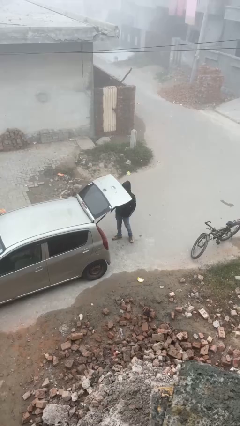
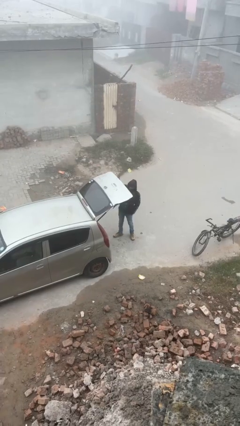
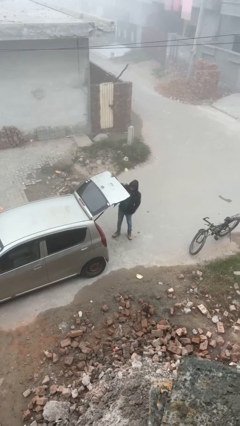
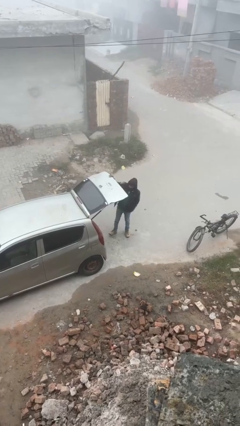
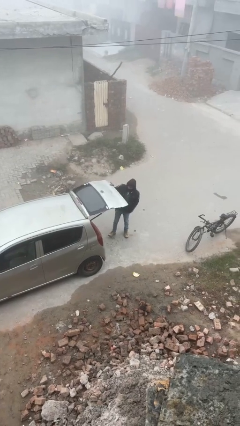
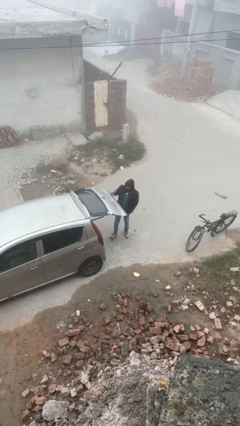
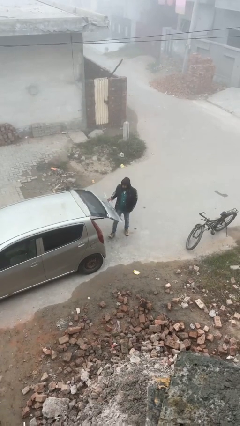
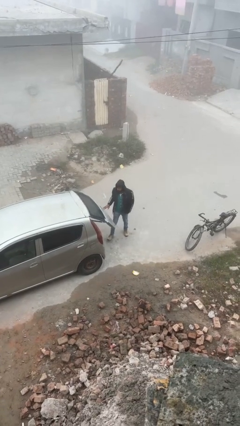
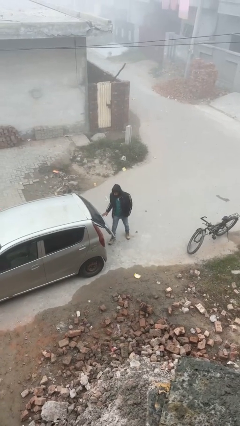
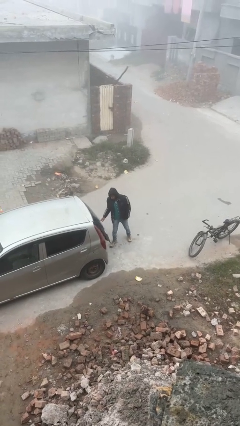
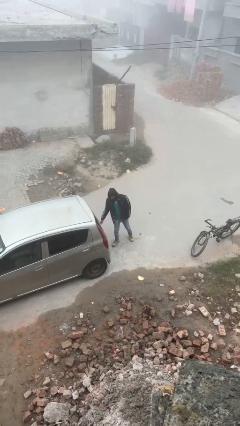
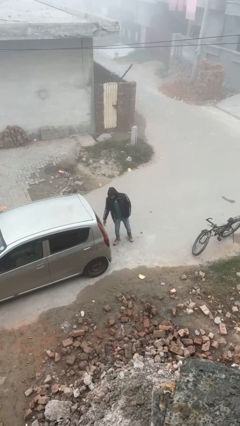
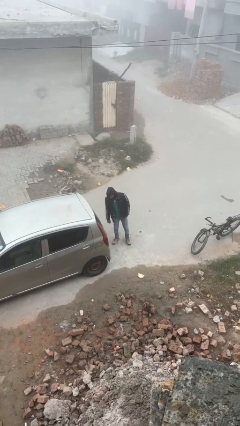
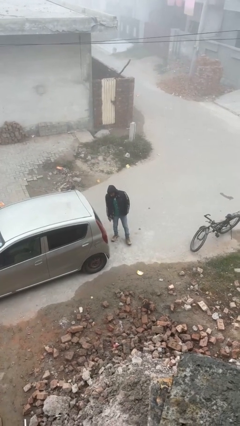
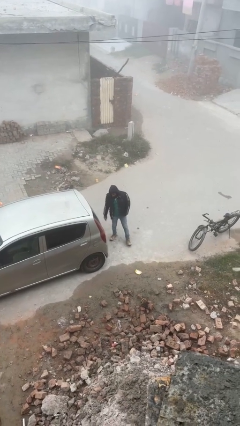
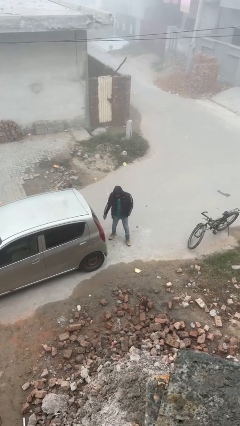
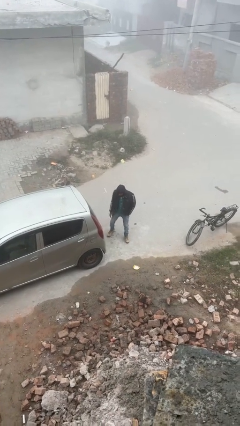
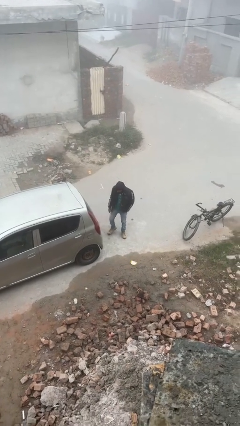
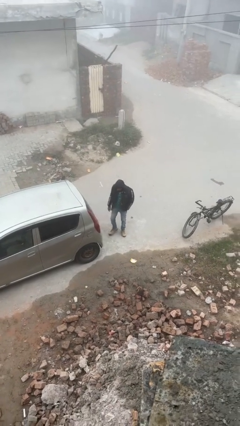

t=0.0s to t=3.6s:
person closes car trunk

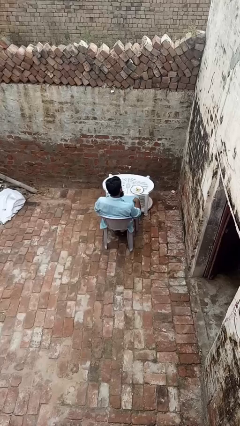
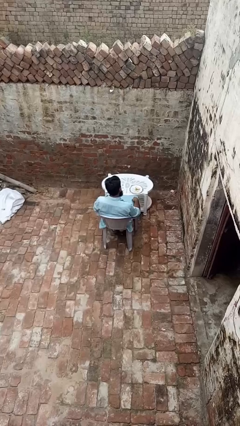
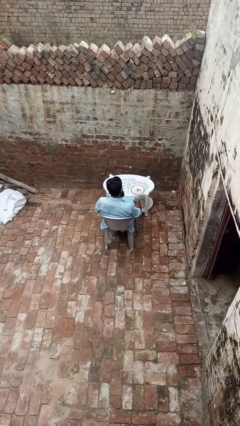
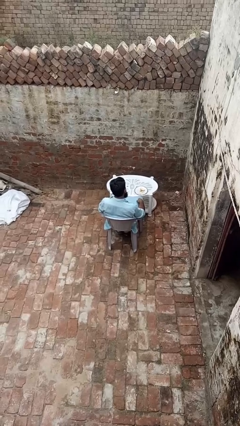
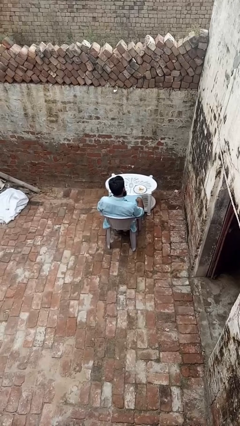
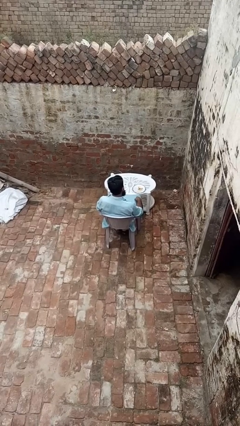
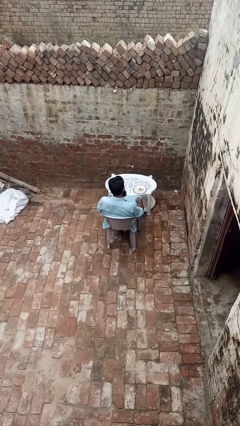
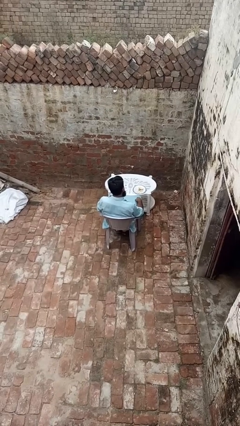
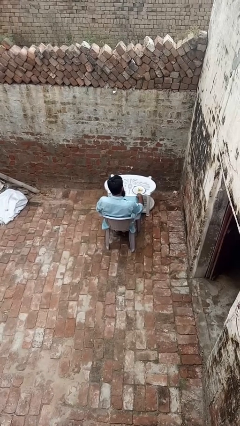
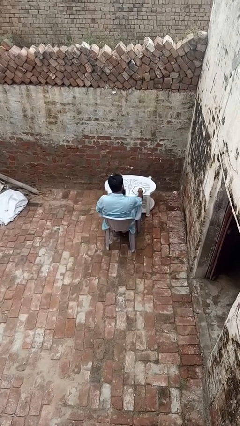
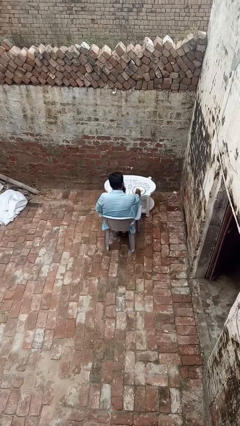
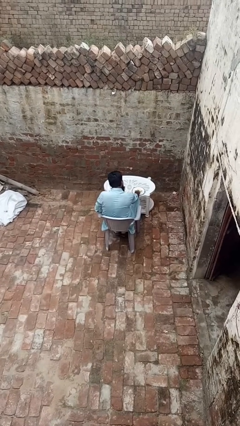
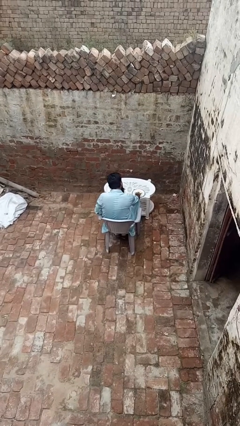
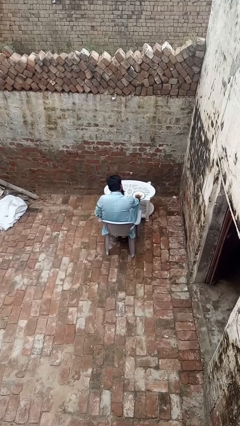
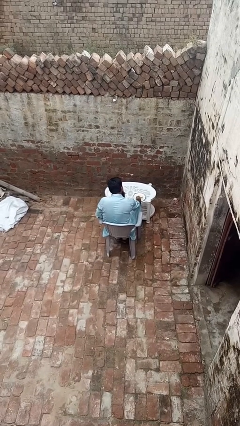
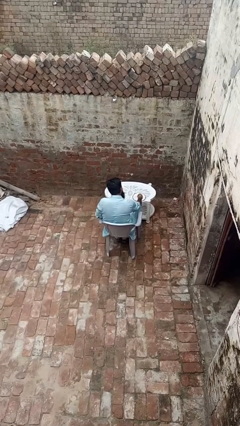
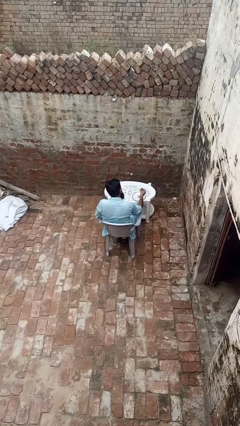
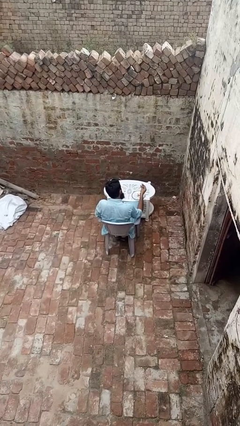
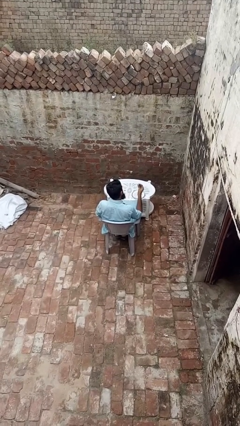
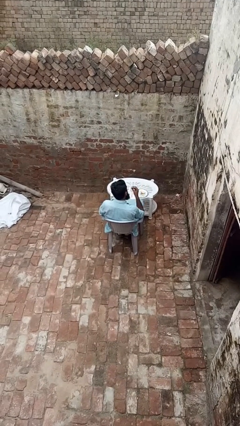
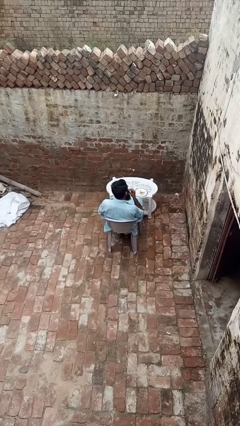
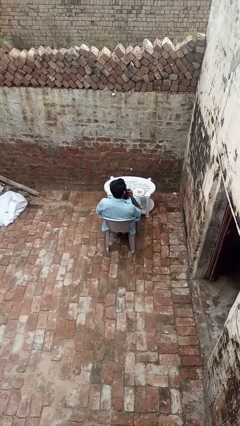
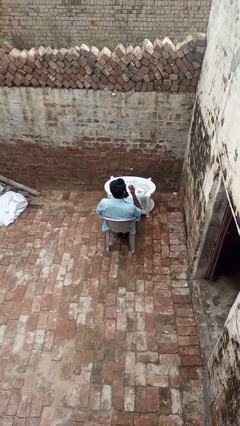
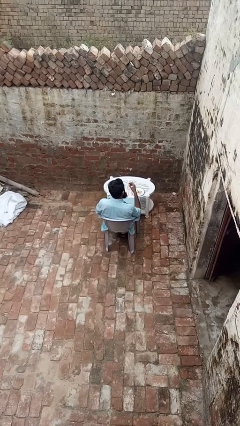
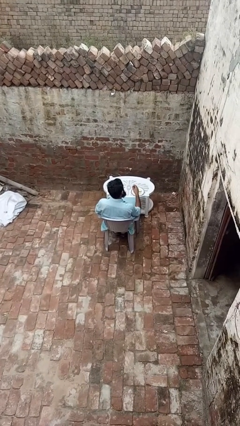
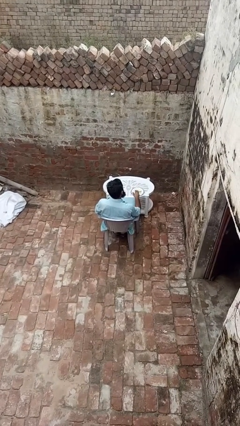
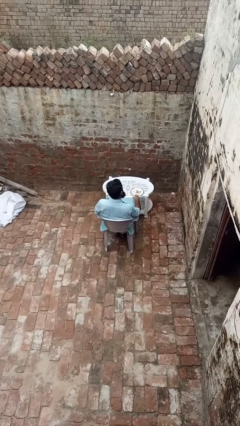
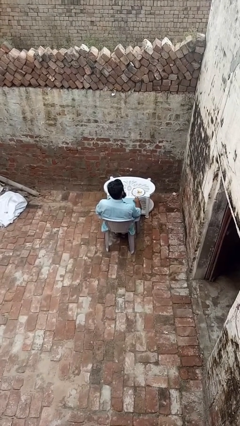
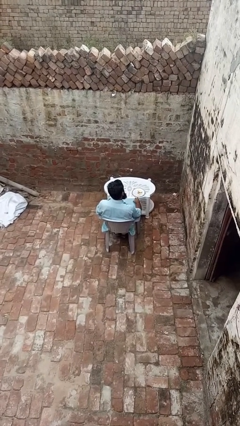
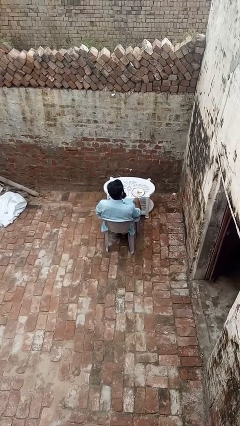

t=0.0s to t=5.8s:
person eats with hands

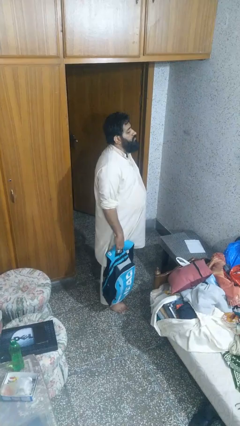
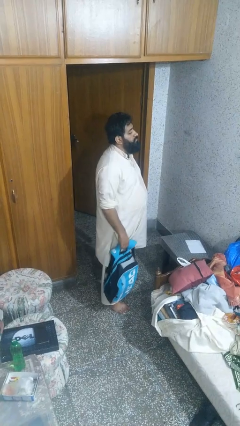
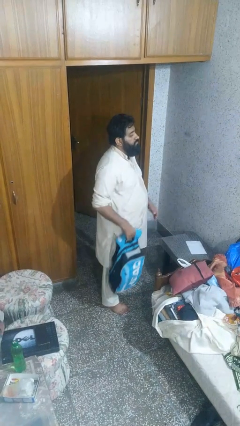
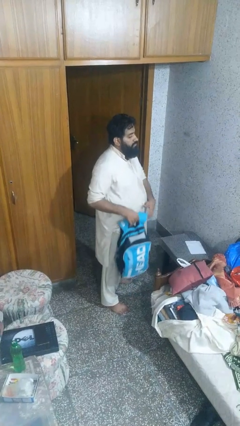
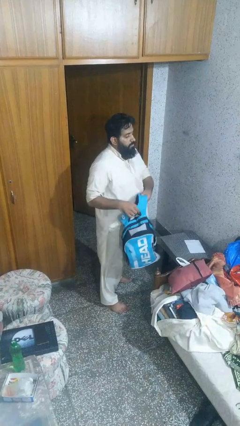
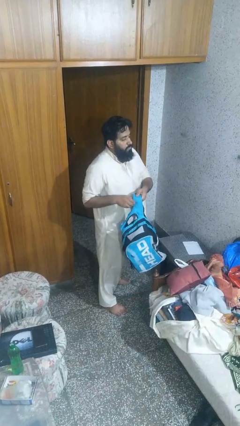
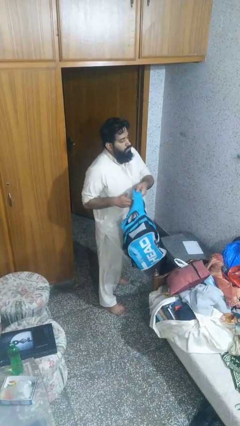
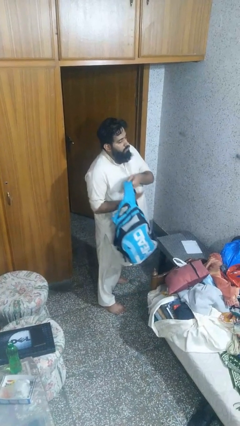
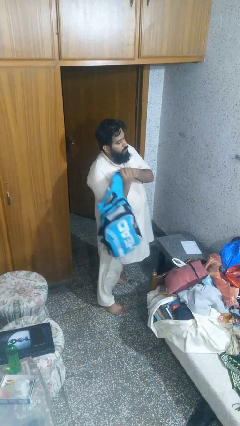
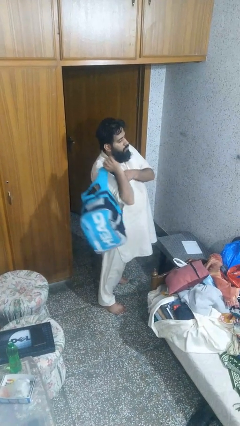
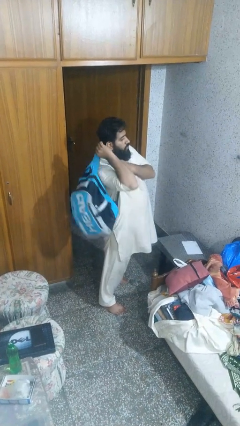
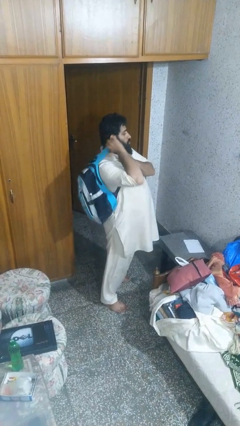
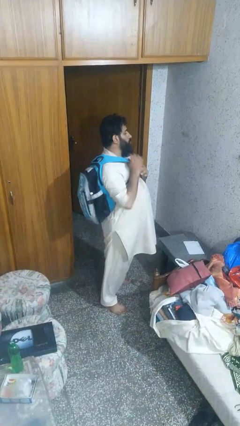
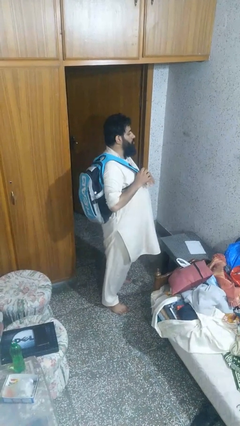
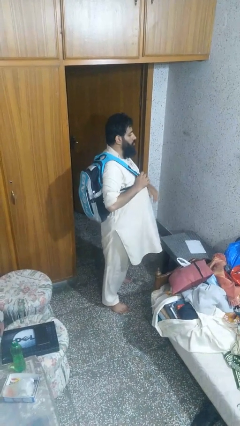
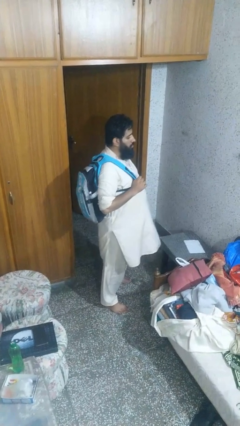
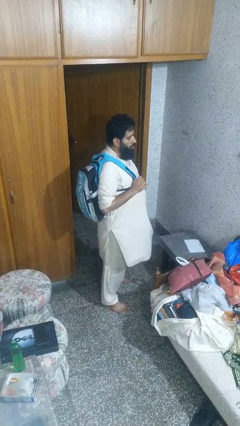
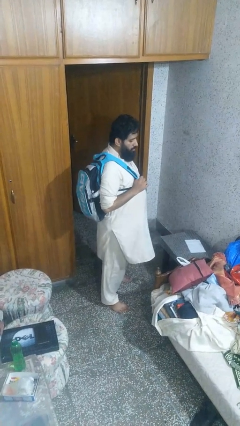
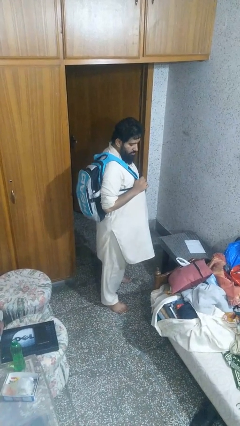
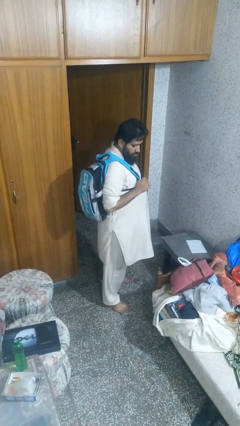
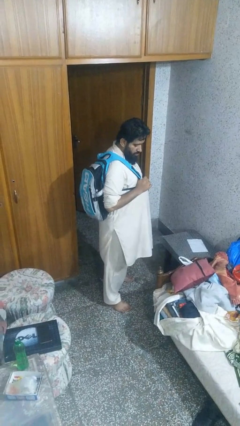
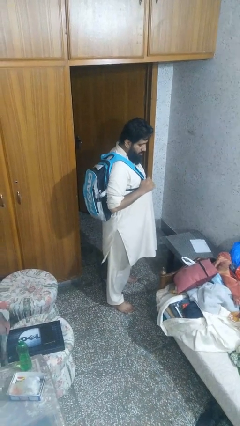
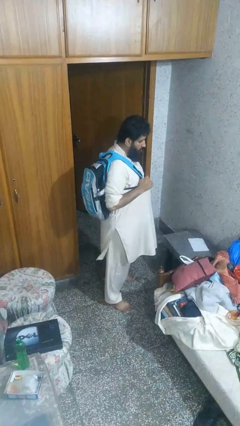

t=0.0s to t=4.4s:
person puts on backpack

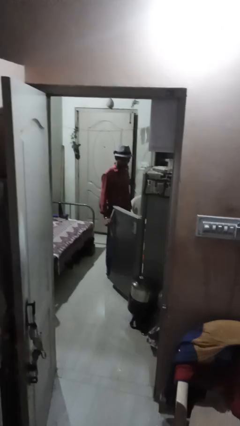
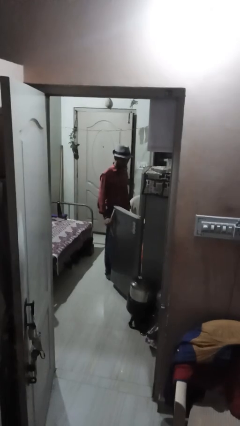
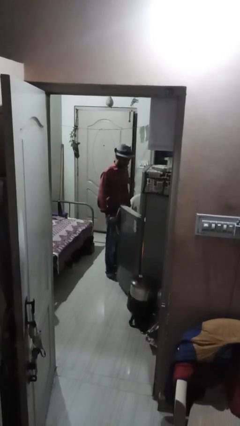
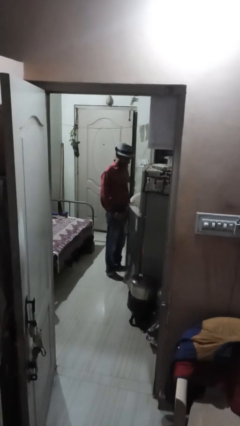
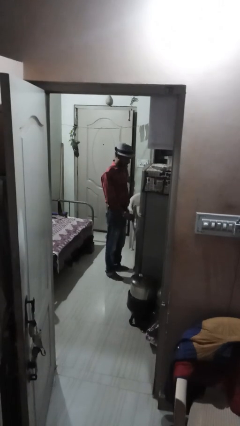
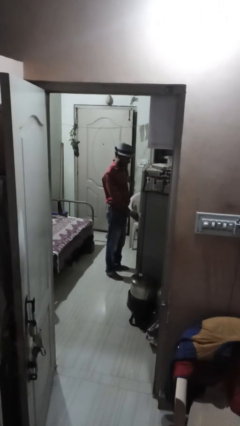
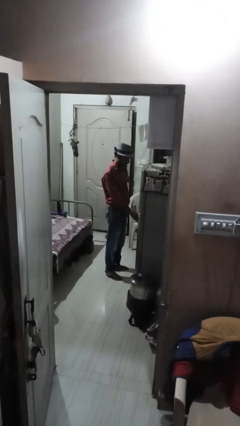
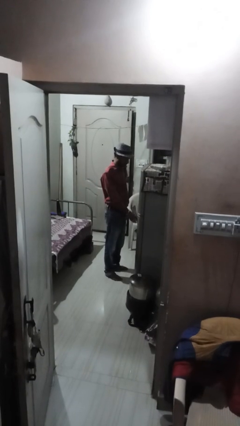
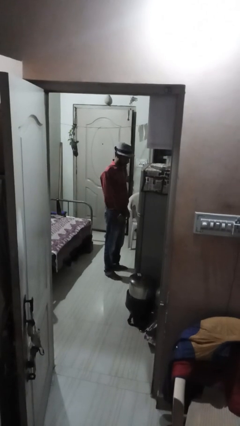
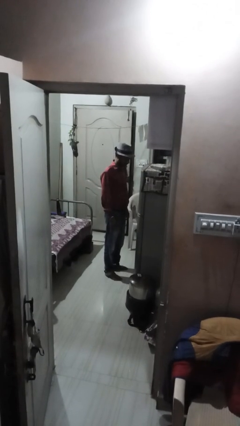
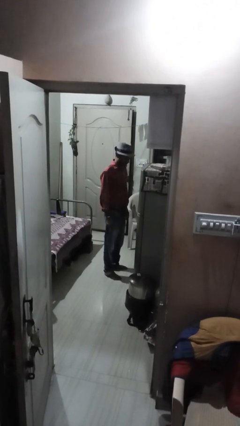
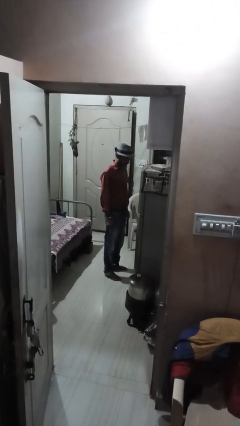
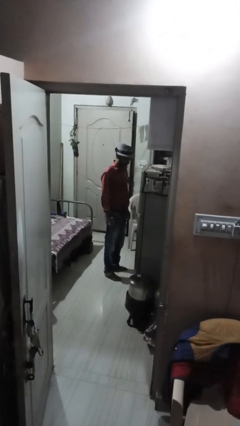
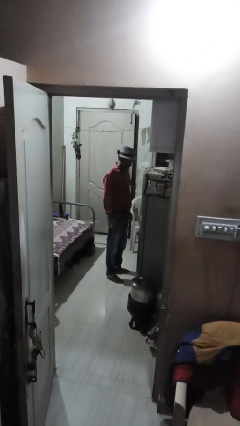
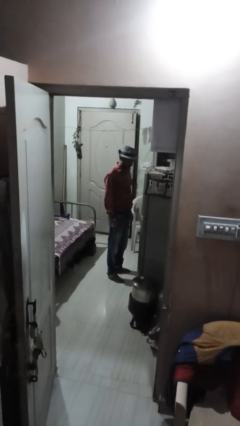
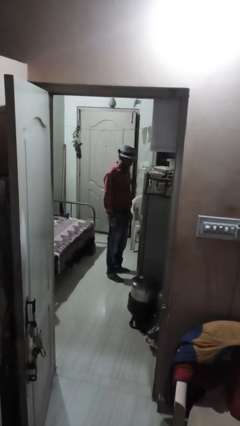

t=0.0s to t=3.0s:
person closes refrigerator

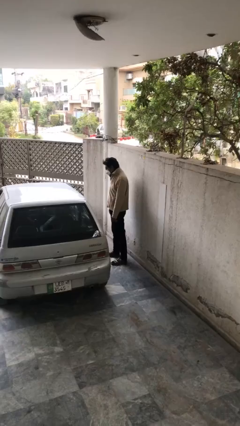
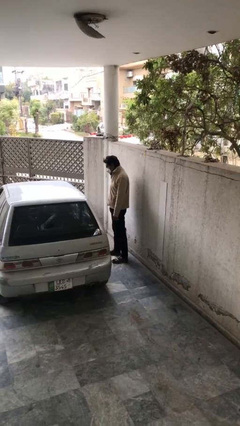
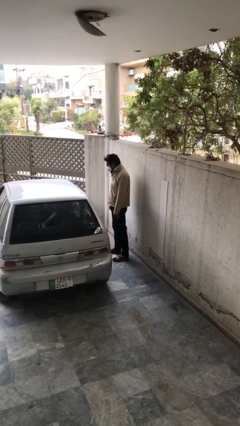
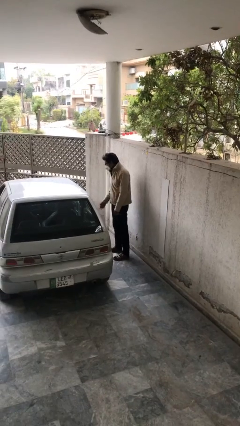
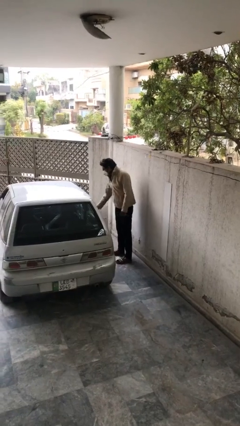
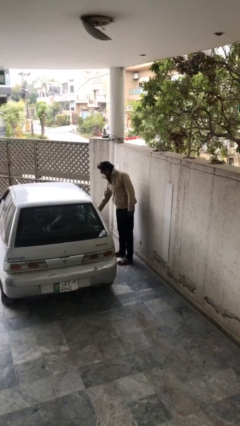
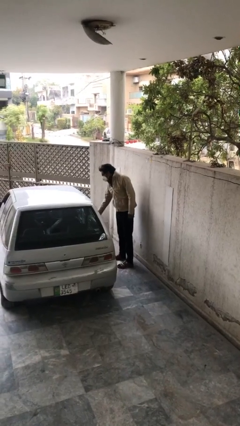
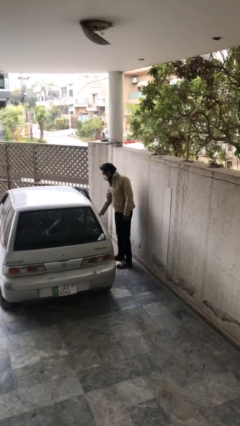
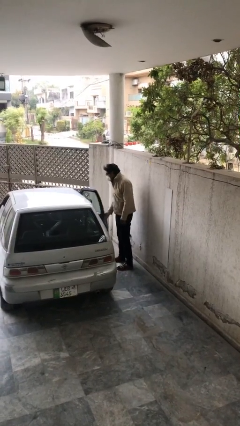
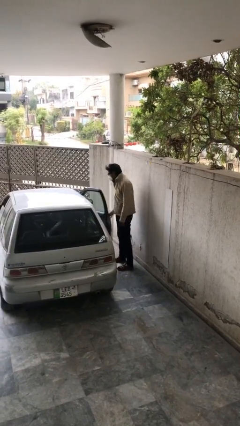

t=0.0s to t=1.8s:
person opens car door
